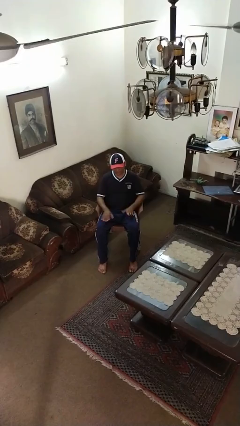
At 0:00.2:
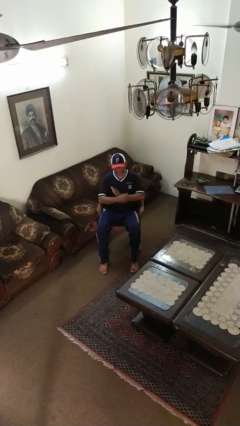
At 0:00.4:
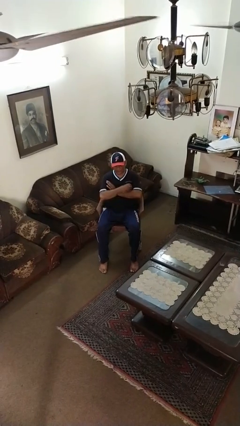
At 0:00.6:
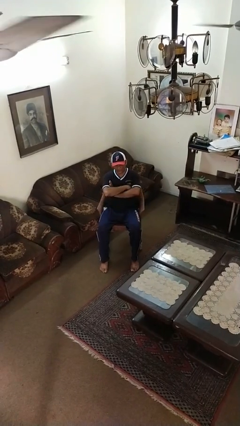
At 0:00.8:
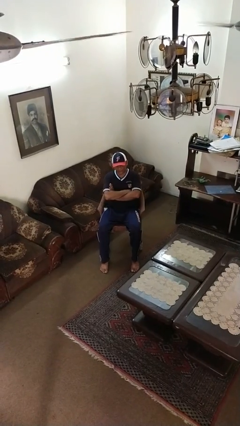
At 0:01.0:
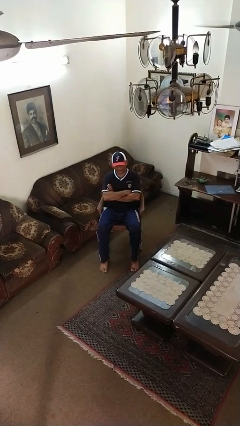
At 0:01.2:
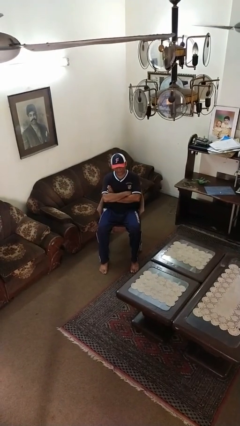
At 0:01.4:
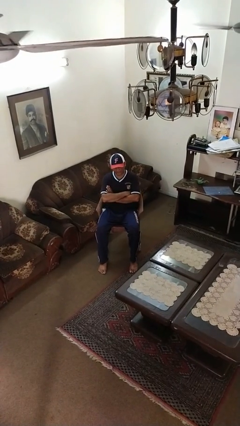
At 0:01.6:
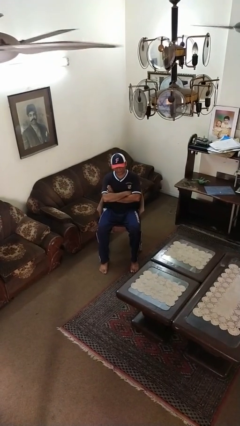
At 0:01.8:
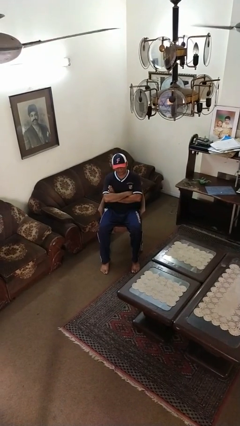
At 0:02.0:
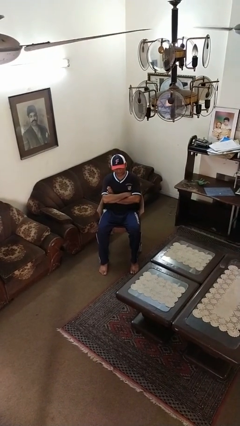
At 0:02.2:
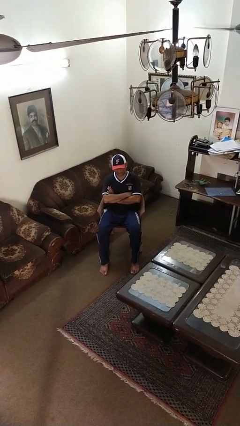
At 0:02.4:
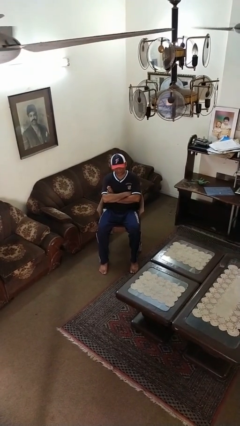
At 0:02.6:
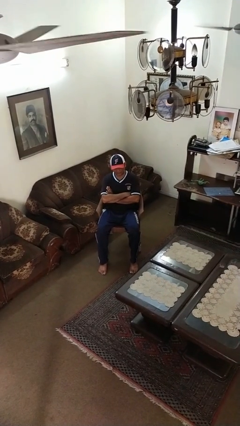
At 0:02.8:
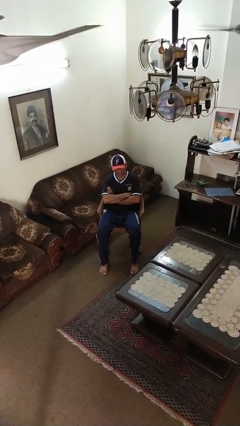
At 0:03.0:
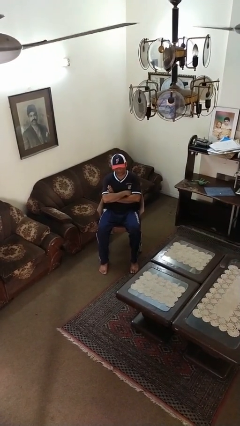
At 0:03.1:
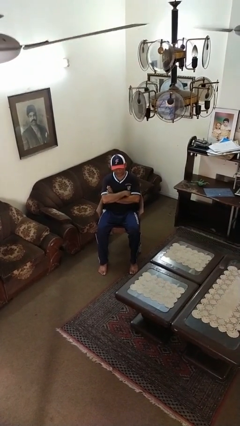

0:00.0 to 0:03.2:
person crosses arms

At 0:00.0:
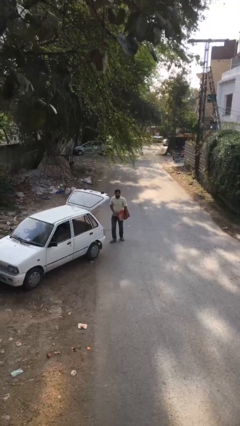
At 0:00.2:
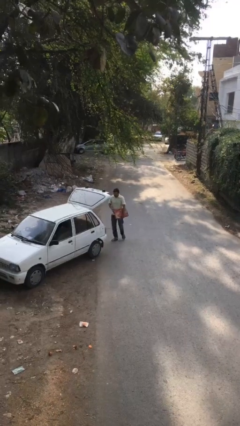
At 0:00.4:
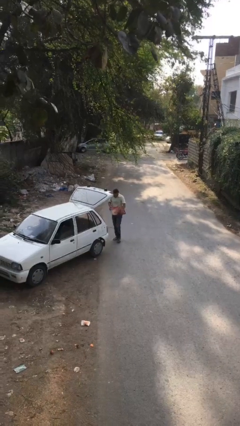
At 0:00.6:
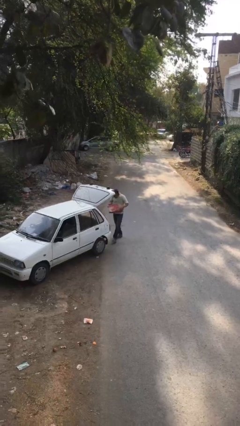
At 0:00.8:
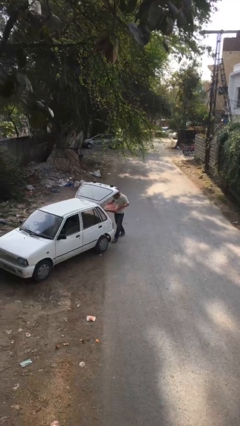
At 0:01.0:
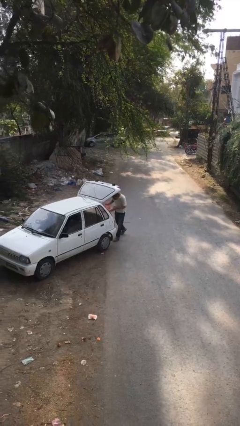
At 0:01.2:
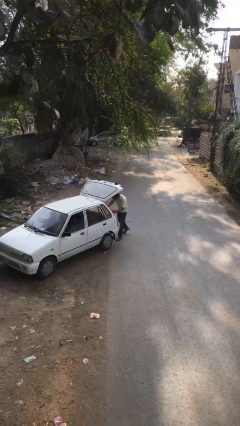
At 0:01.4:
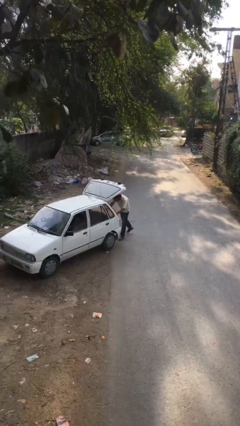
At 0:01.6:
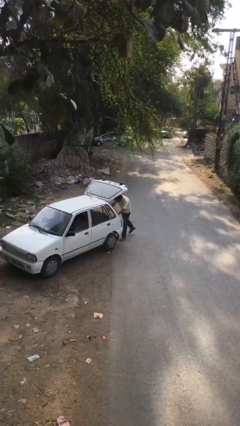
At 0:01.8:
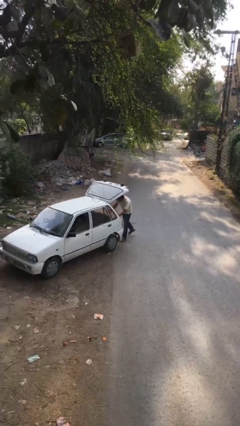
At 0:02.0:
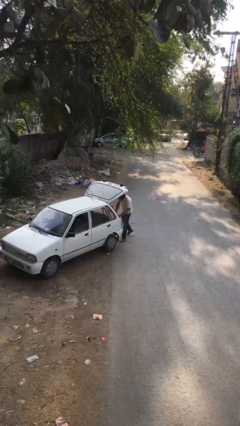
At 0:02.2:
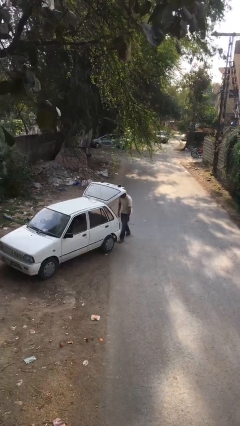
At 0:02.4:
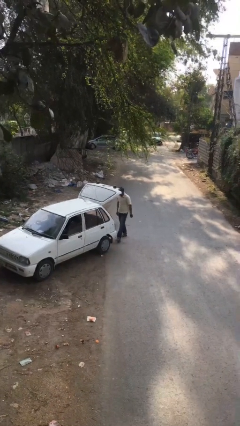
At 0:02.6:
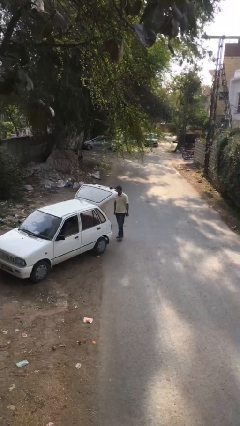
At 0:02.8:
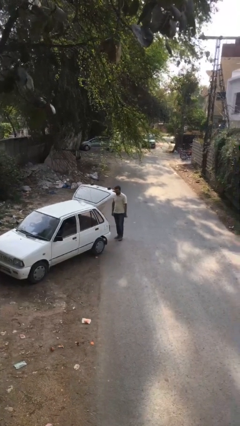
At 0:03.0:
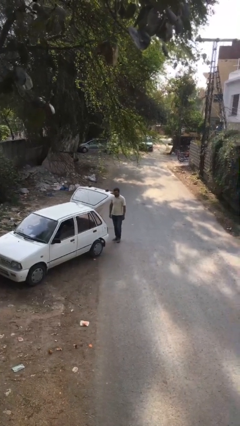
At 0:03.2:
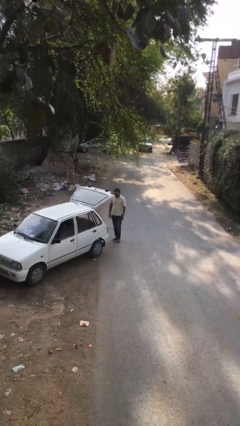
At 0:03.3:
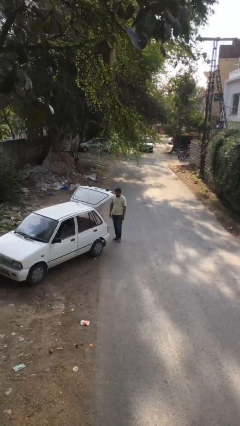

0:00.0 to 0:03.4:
person loads car

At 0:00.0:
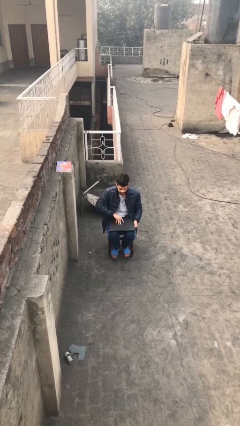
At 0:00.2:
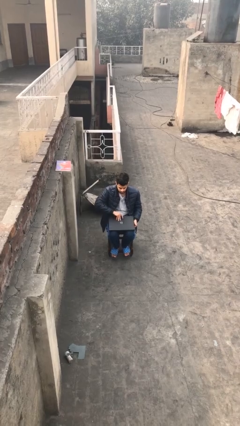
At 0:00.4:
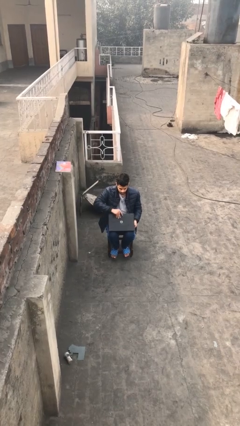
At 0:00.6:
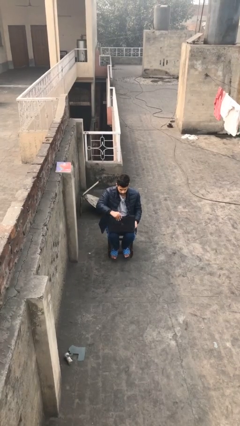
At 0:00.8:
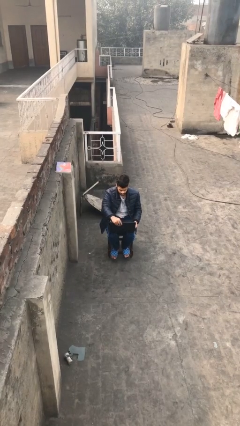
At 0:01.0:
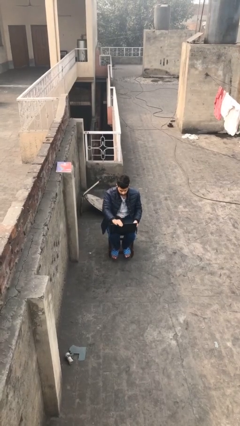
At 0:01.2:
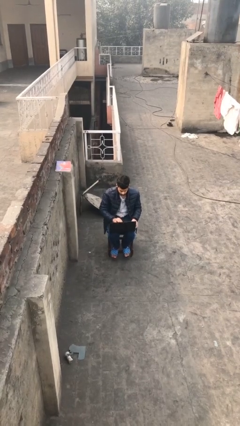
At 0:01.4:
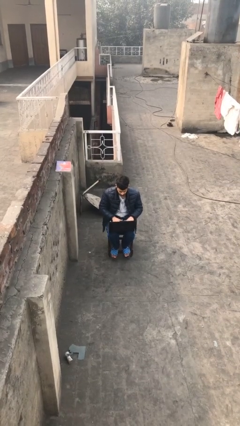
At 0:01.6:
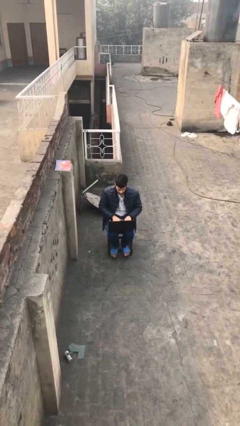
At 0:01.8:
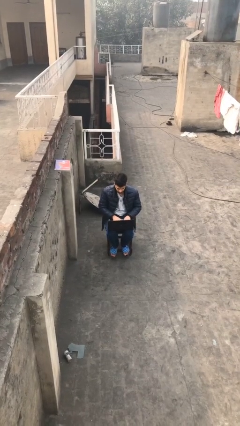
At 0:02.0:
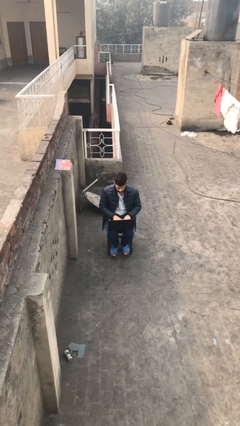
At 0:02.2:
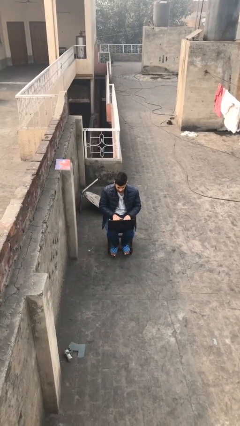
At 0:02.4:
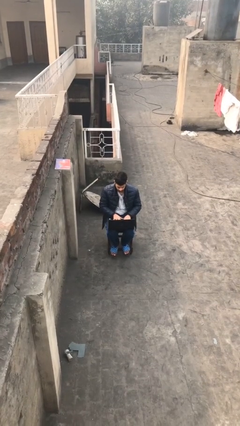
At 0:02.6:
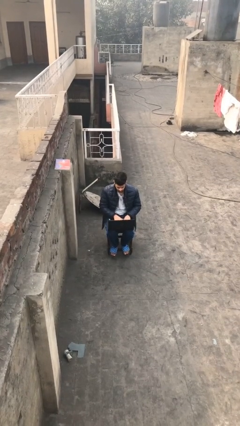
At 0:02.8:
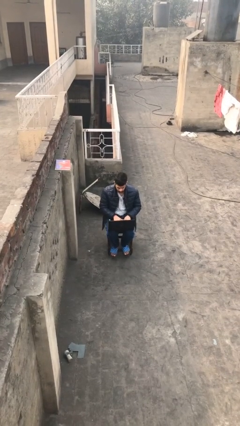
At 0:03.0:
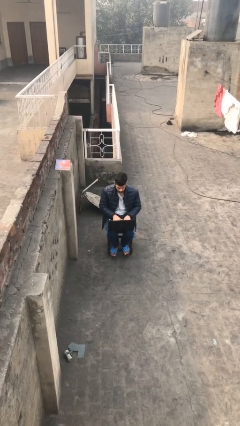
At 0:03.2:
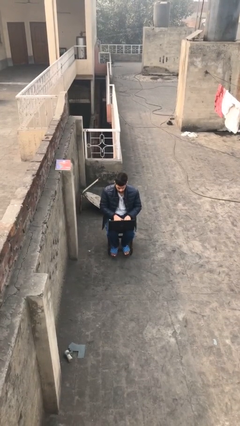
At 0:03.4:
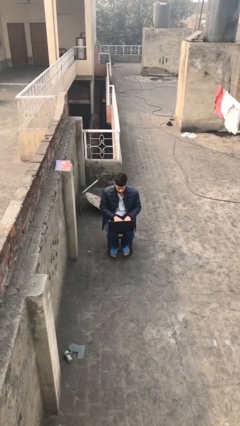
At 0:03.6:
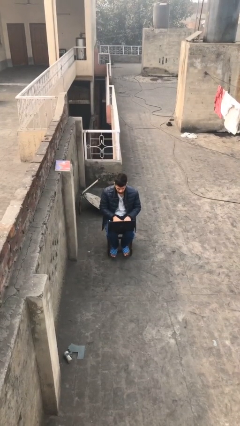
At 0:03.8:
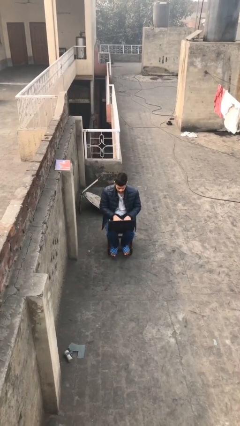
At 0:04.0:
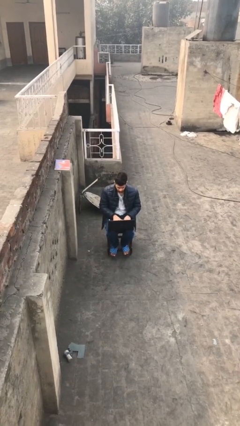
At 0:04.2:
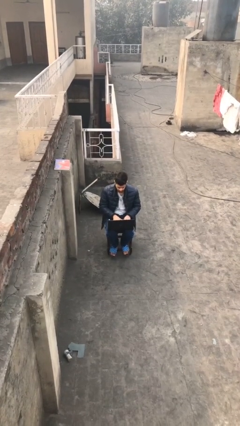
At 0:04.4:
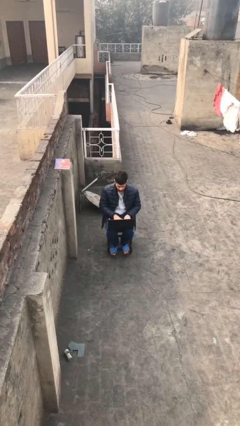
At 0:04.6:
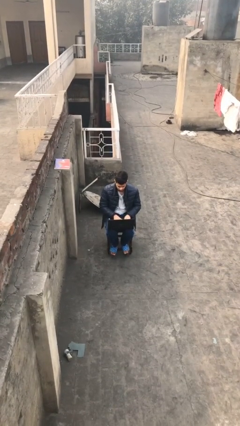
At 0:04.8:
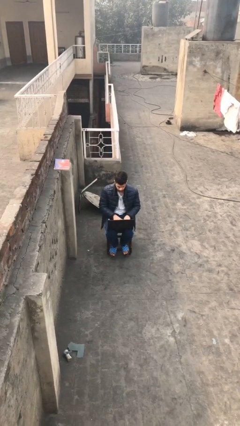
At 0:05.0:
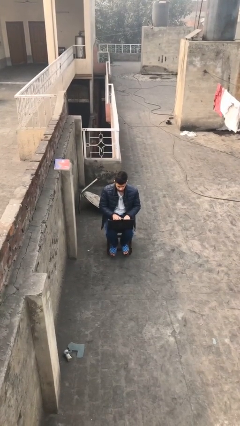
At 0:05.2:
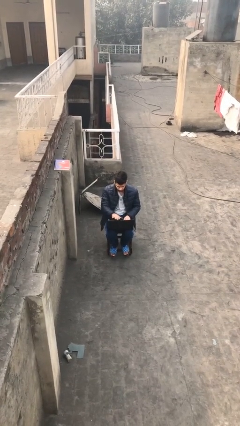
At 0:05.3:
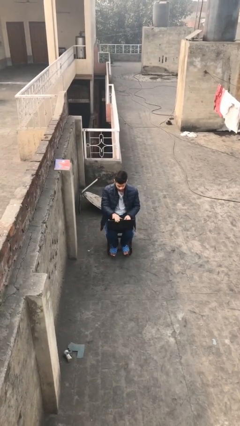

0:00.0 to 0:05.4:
person interacts with laptop

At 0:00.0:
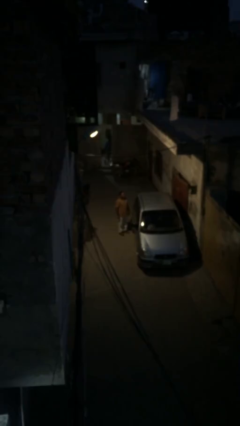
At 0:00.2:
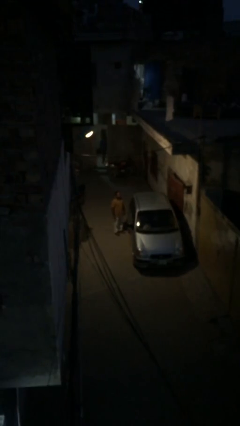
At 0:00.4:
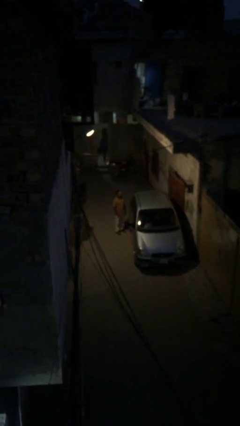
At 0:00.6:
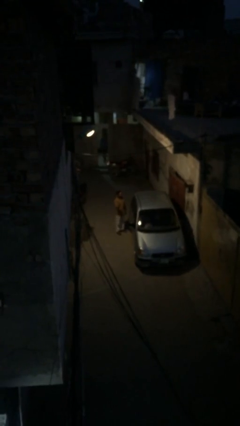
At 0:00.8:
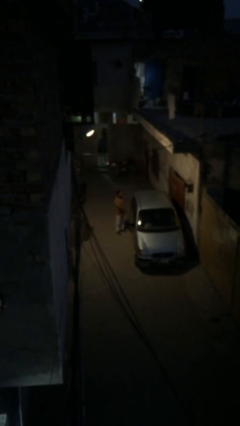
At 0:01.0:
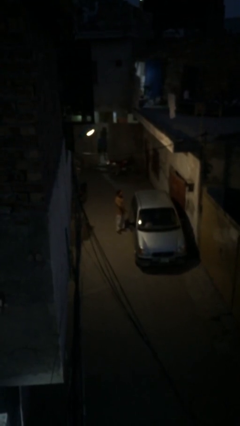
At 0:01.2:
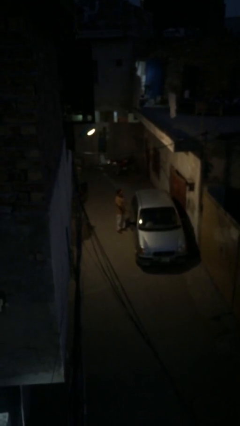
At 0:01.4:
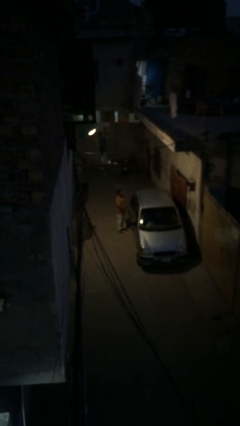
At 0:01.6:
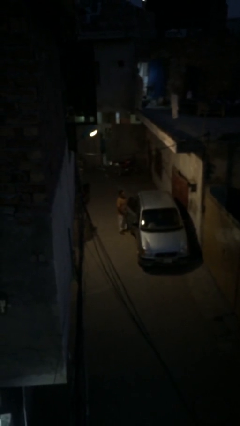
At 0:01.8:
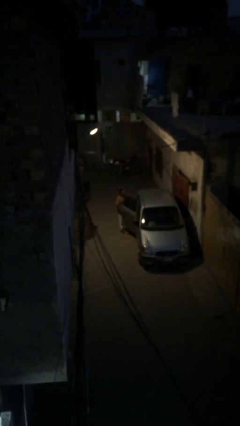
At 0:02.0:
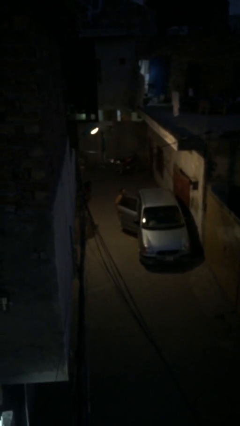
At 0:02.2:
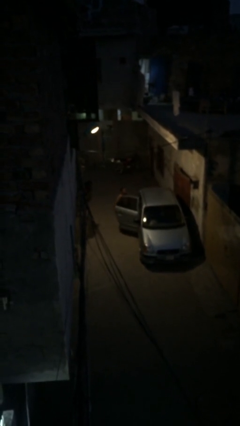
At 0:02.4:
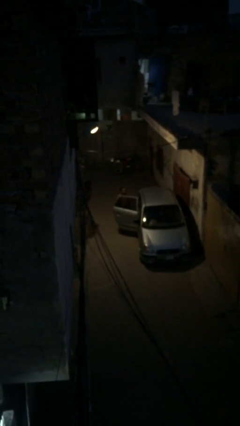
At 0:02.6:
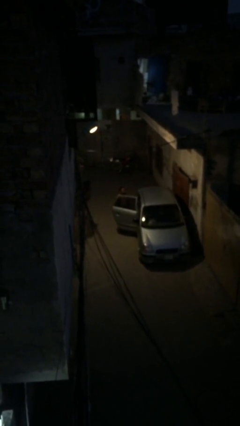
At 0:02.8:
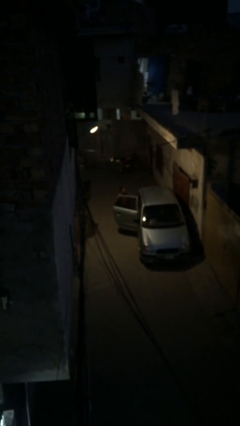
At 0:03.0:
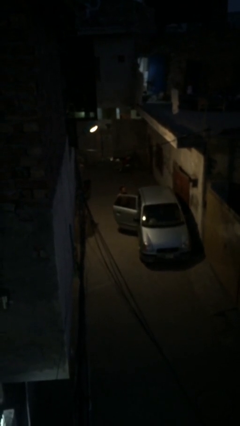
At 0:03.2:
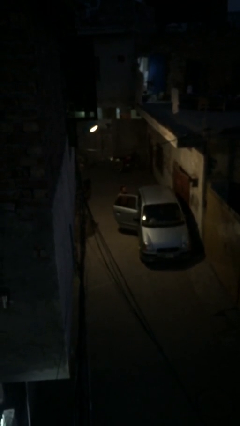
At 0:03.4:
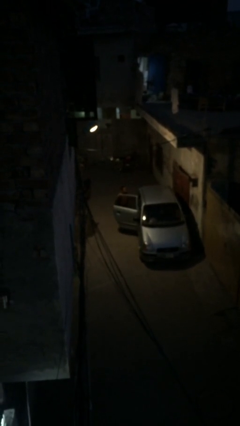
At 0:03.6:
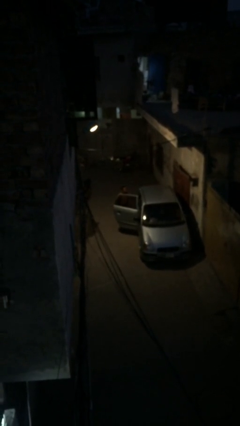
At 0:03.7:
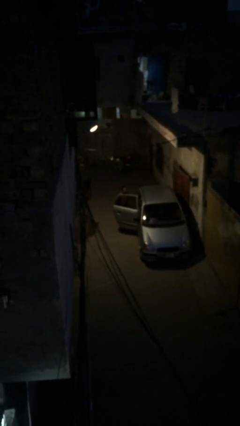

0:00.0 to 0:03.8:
person opens car door

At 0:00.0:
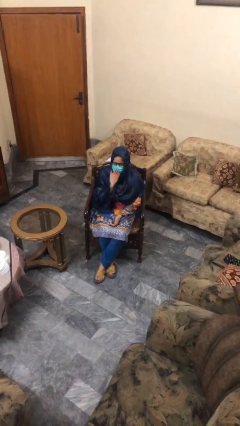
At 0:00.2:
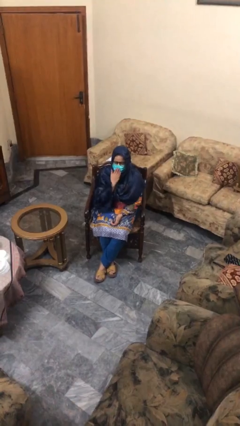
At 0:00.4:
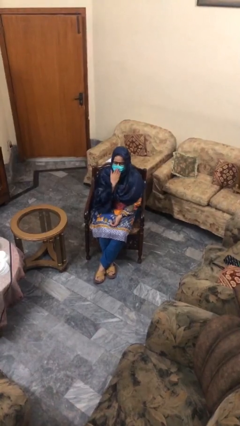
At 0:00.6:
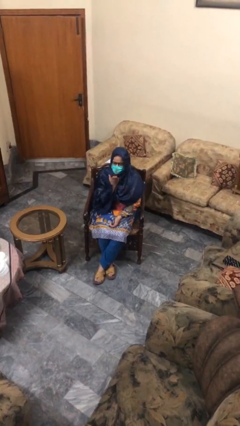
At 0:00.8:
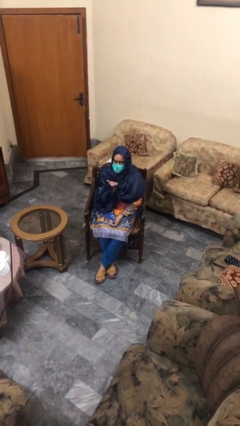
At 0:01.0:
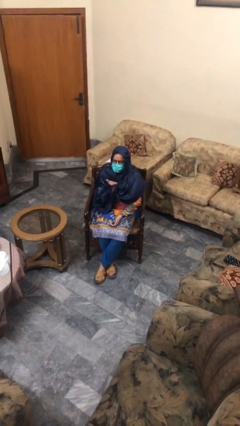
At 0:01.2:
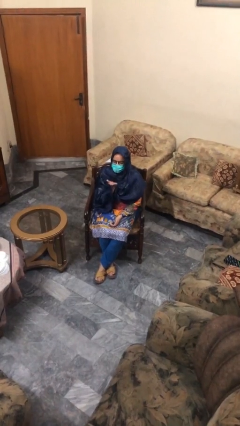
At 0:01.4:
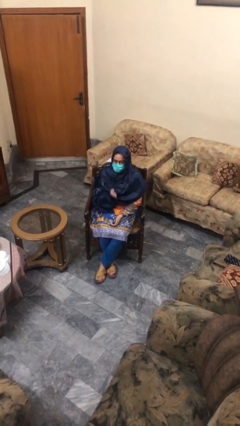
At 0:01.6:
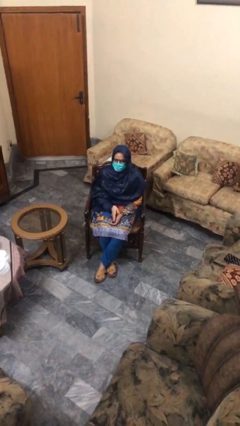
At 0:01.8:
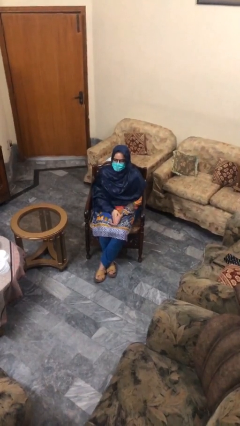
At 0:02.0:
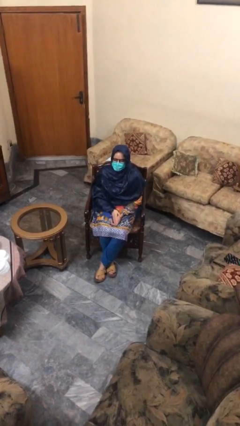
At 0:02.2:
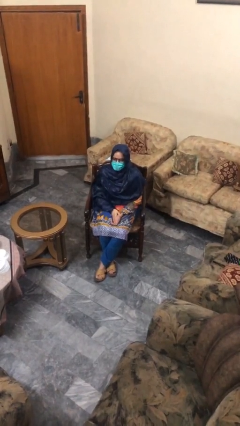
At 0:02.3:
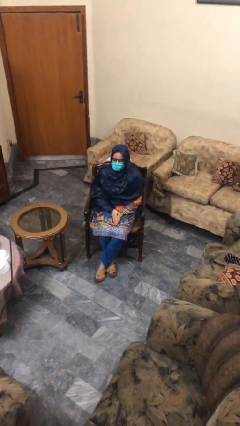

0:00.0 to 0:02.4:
person gestures blow kiss
